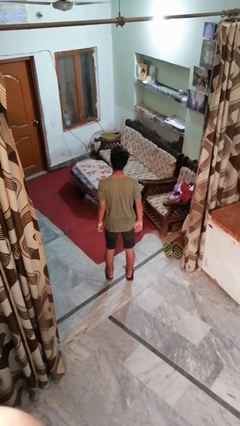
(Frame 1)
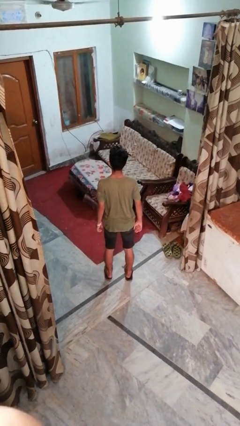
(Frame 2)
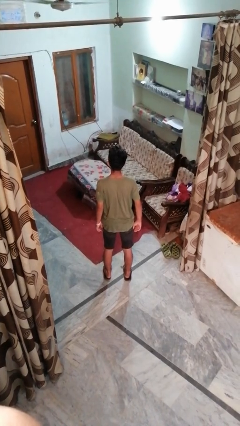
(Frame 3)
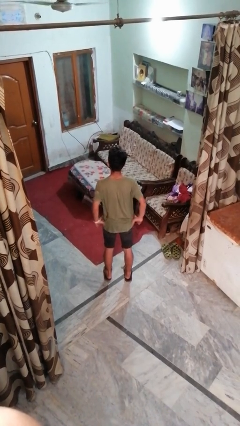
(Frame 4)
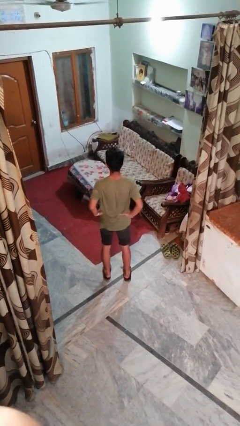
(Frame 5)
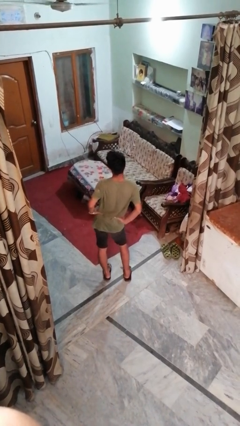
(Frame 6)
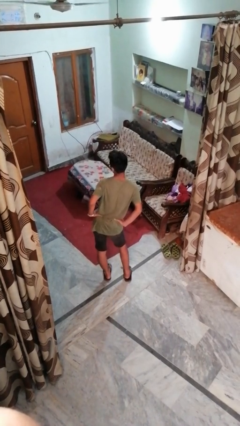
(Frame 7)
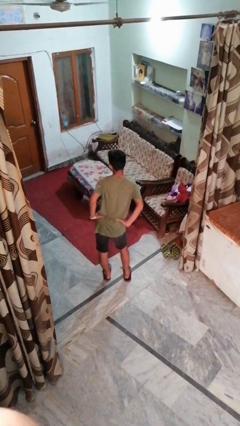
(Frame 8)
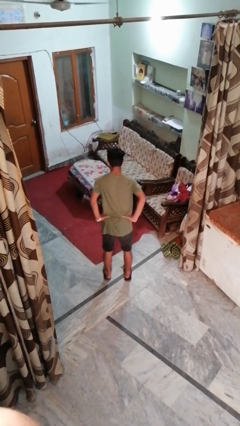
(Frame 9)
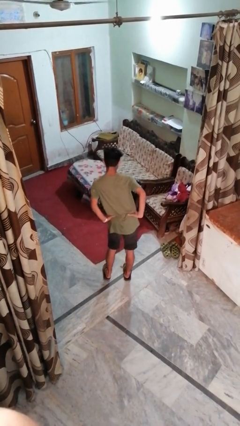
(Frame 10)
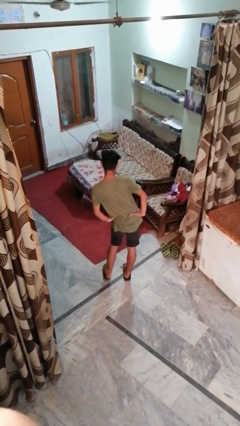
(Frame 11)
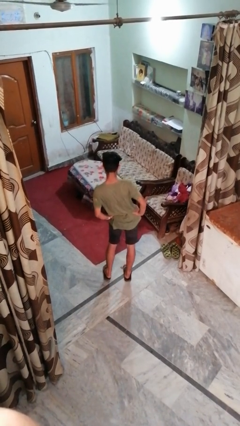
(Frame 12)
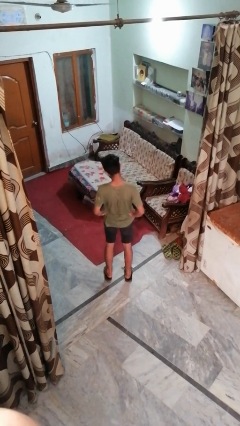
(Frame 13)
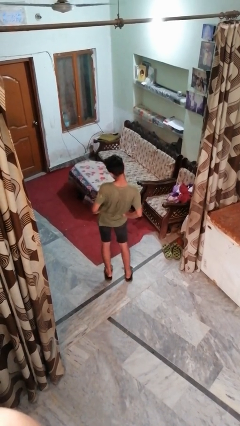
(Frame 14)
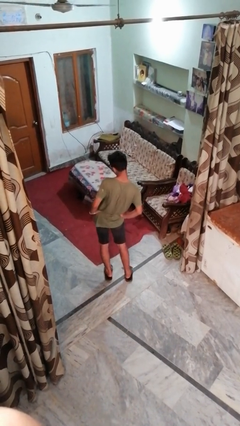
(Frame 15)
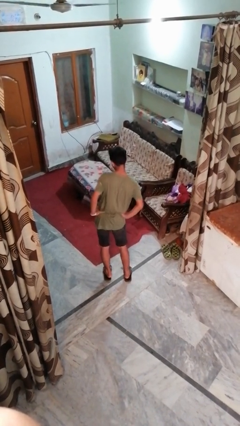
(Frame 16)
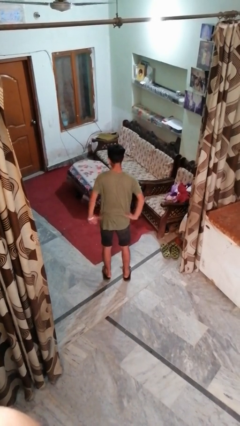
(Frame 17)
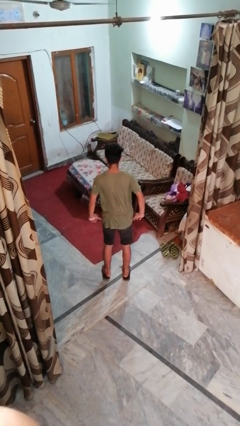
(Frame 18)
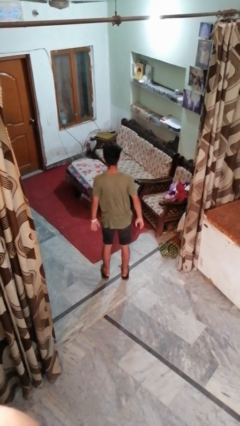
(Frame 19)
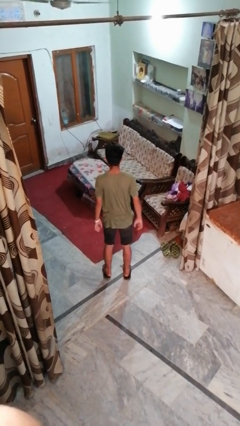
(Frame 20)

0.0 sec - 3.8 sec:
person wiggles hips

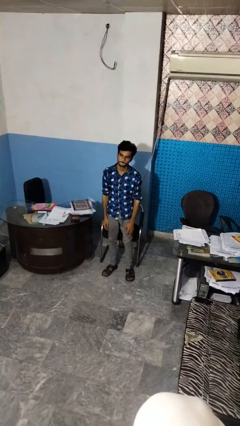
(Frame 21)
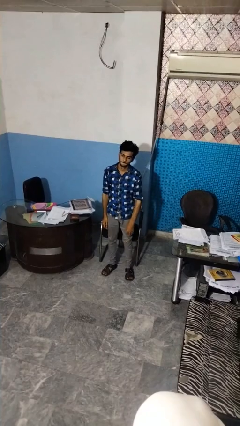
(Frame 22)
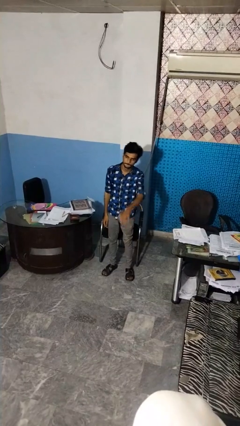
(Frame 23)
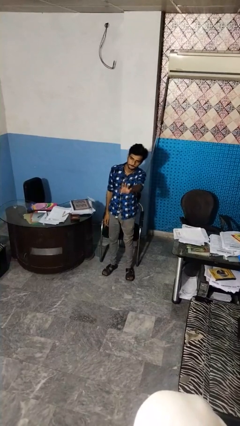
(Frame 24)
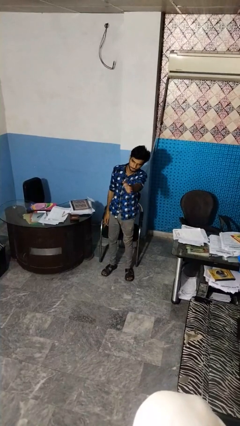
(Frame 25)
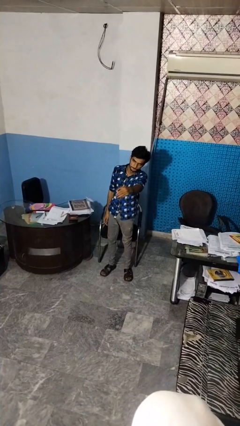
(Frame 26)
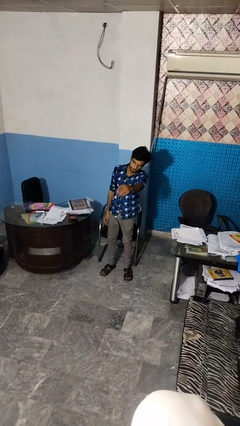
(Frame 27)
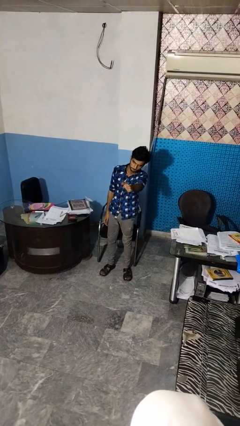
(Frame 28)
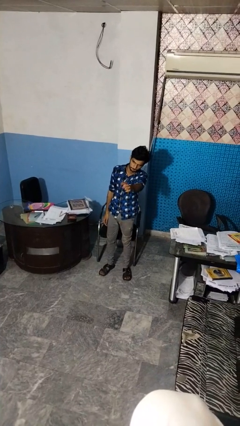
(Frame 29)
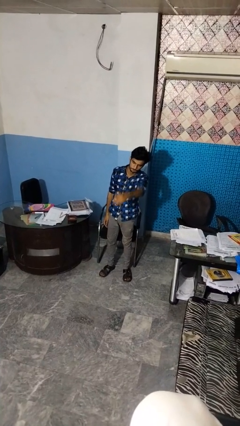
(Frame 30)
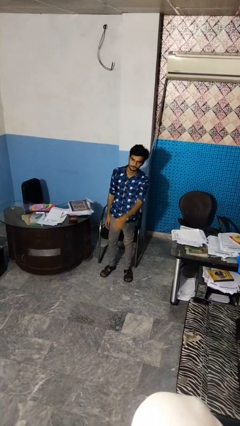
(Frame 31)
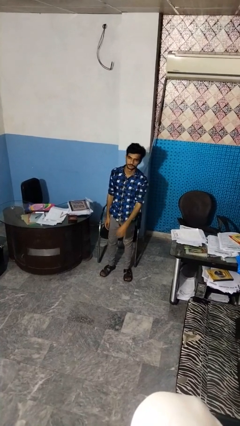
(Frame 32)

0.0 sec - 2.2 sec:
person gestures come here

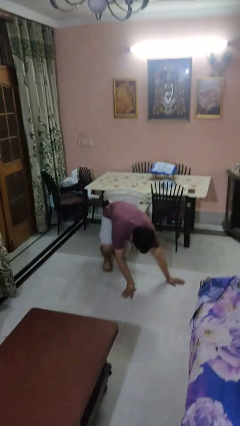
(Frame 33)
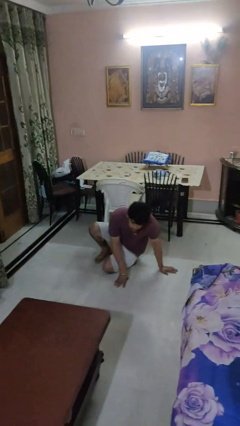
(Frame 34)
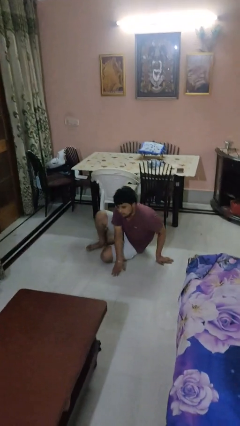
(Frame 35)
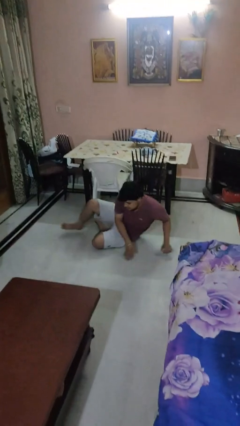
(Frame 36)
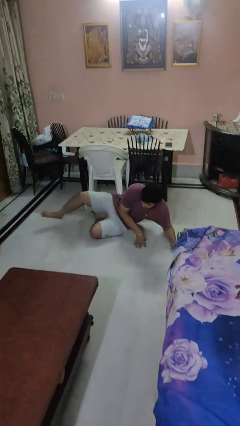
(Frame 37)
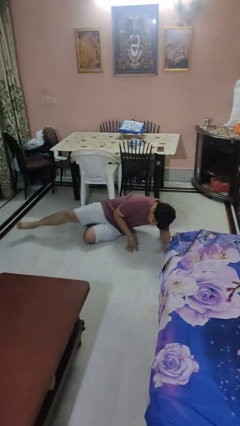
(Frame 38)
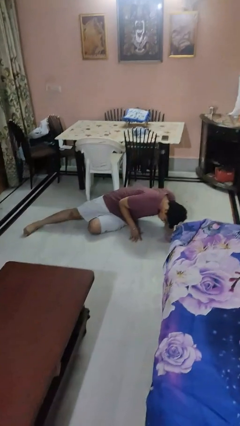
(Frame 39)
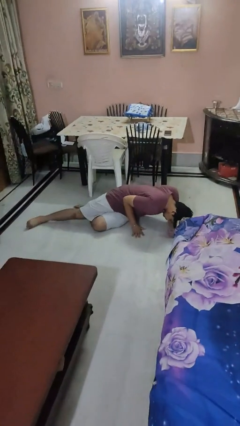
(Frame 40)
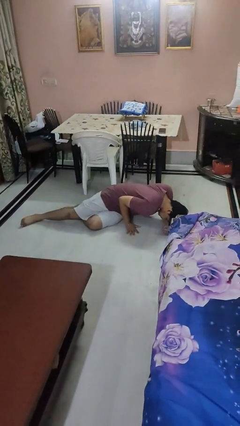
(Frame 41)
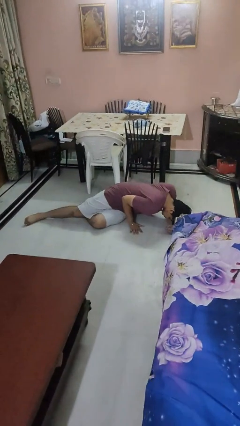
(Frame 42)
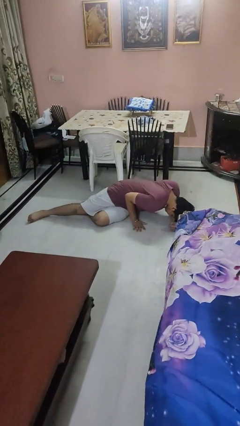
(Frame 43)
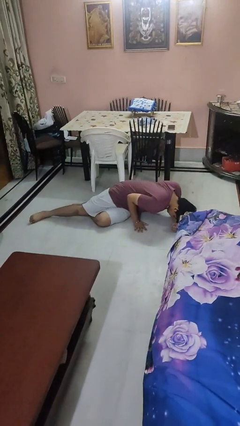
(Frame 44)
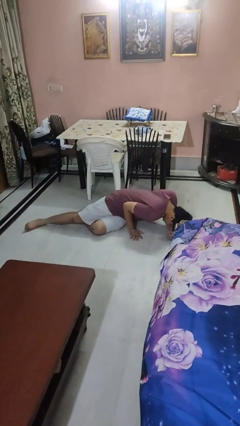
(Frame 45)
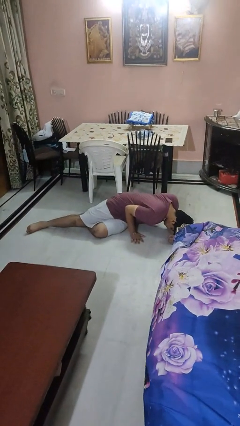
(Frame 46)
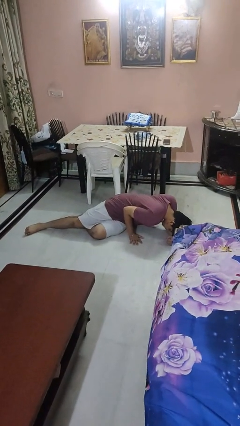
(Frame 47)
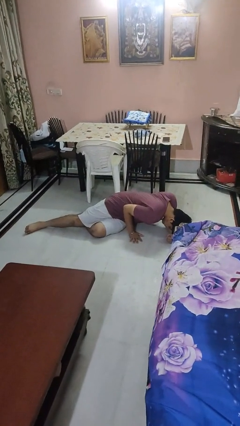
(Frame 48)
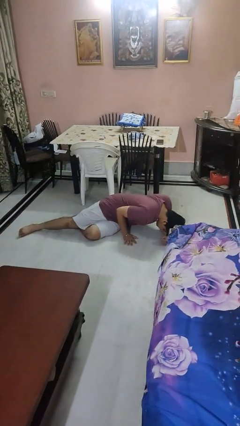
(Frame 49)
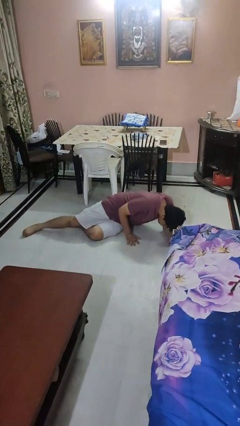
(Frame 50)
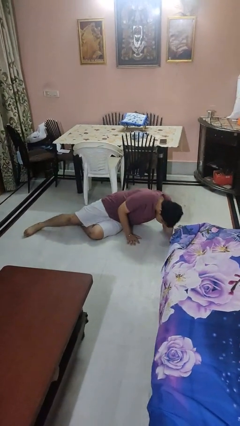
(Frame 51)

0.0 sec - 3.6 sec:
person lies down on floor

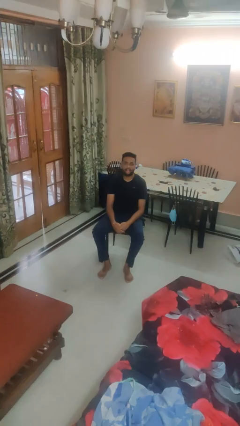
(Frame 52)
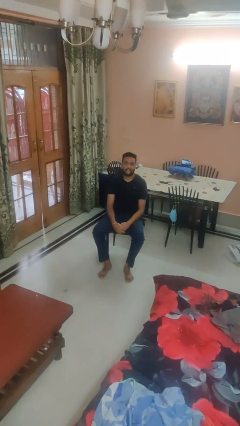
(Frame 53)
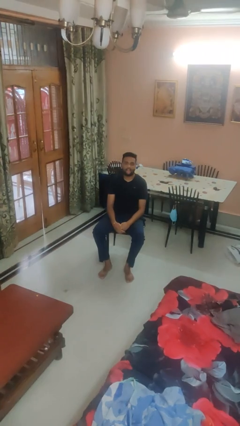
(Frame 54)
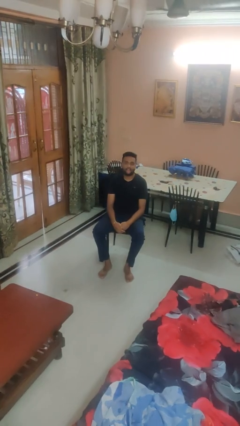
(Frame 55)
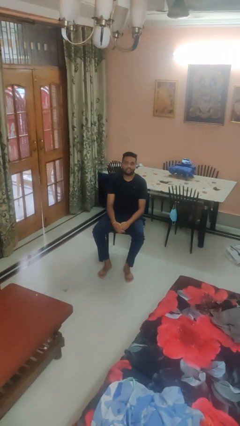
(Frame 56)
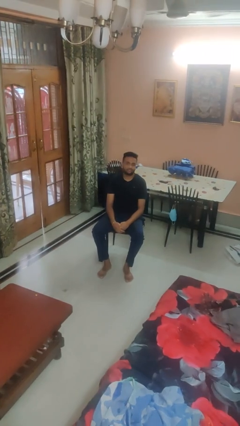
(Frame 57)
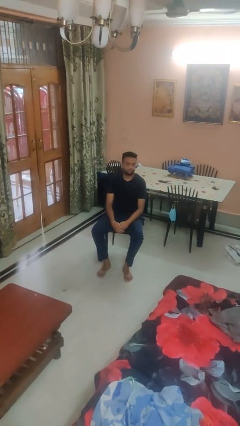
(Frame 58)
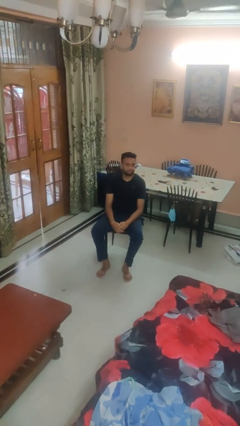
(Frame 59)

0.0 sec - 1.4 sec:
person sticks out tongue

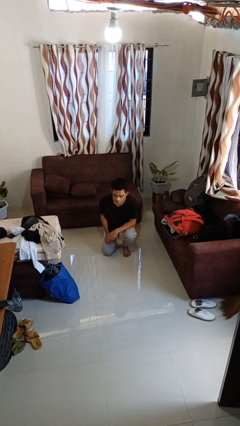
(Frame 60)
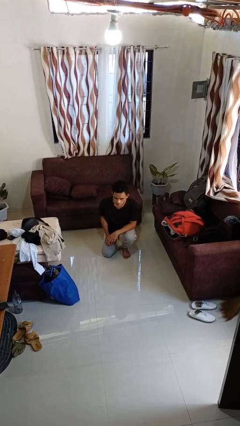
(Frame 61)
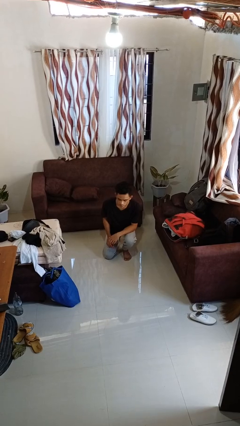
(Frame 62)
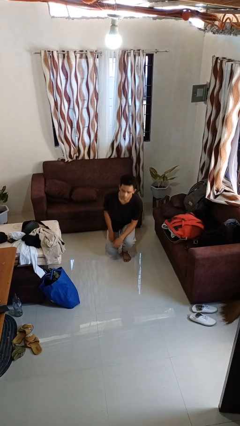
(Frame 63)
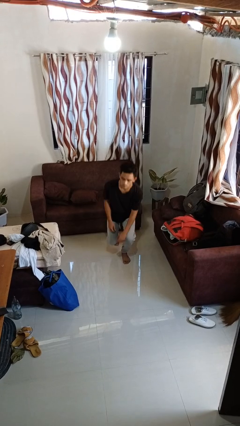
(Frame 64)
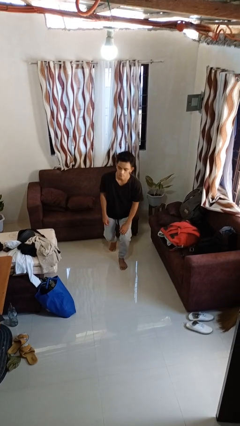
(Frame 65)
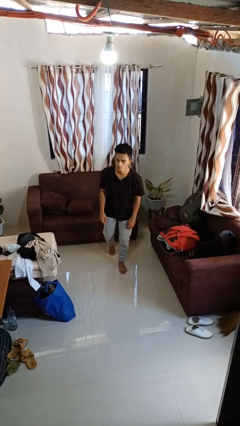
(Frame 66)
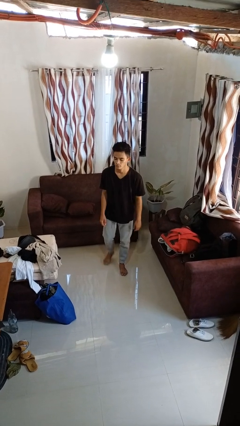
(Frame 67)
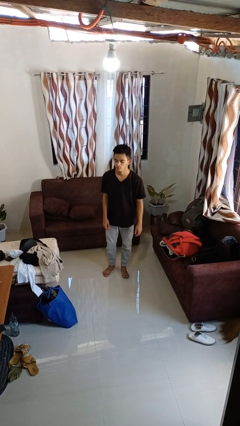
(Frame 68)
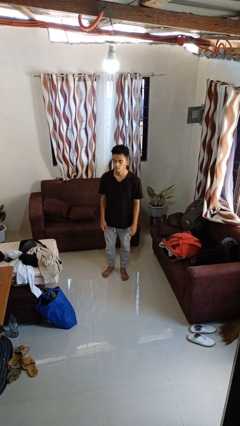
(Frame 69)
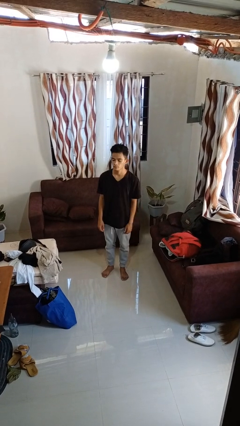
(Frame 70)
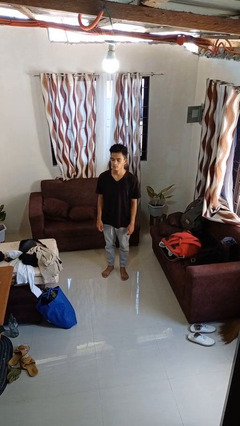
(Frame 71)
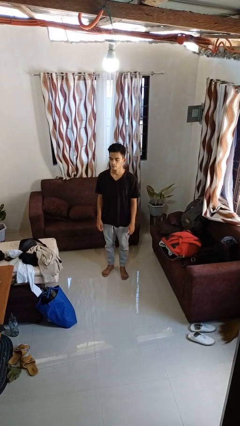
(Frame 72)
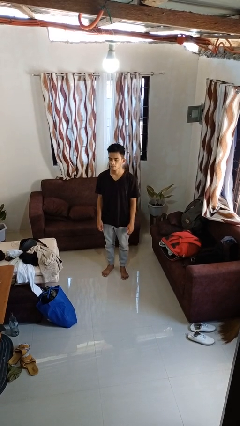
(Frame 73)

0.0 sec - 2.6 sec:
person stands up from floor

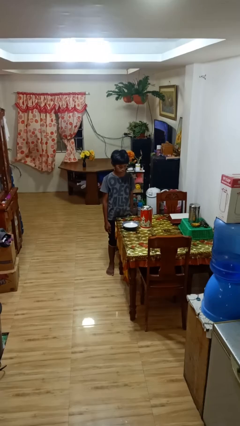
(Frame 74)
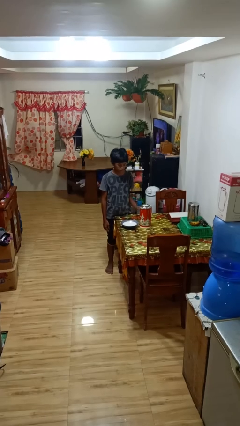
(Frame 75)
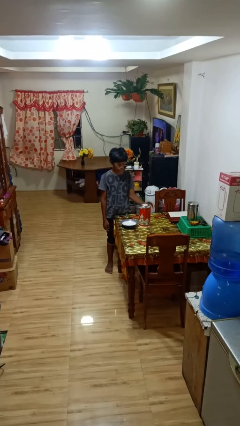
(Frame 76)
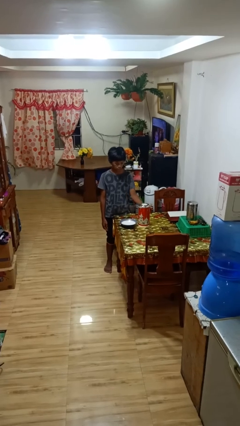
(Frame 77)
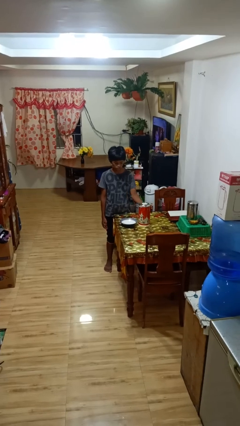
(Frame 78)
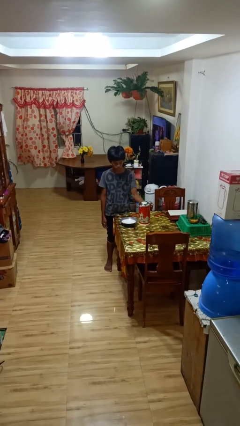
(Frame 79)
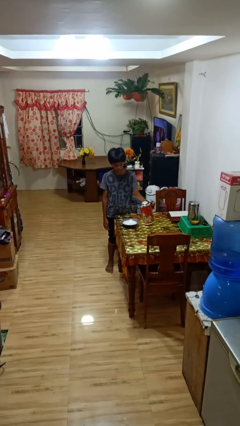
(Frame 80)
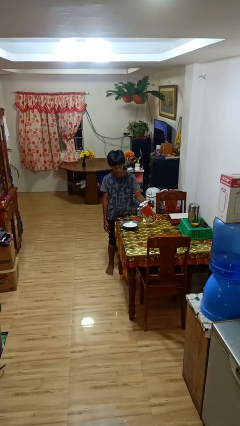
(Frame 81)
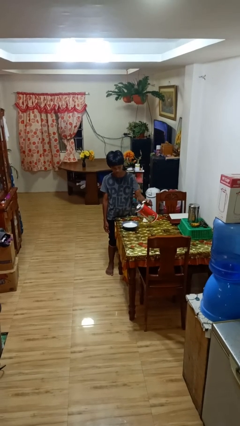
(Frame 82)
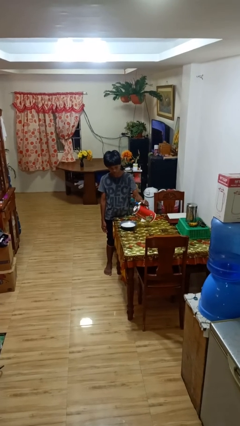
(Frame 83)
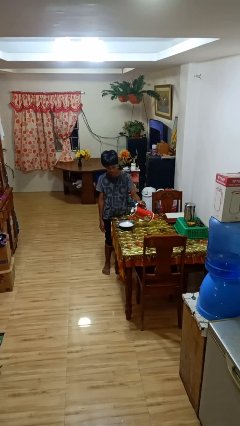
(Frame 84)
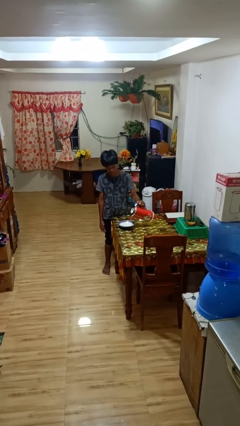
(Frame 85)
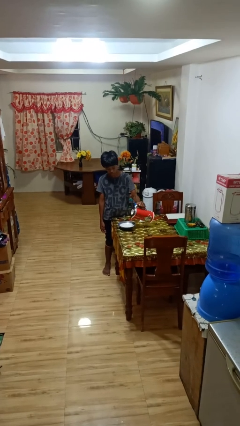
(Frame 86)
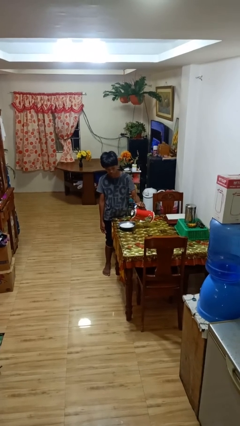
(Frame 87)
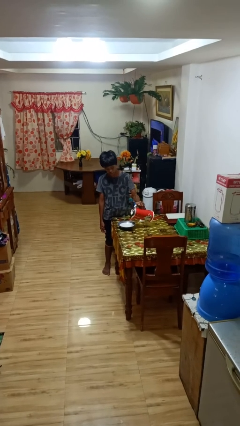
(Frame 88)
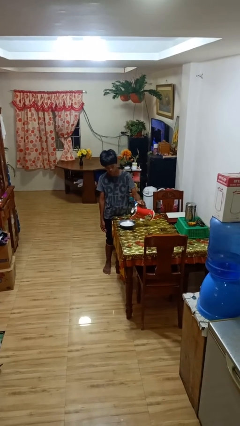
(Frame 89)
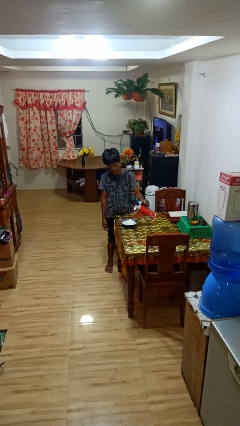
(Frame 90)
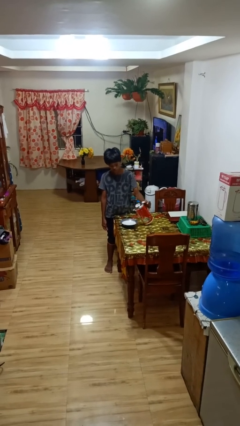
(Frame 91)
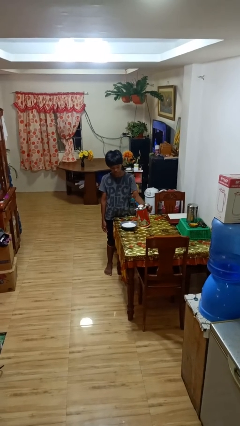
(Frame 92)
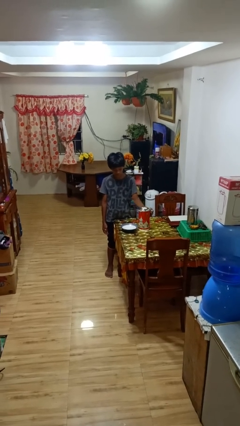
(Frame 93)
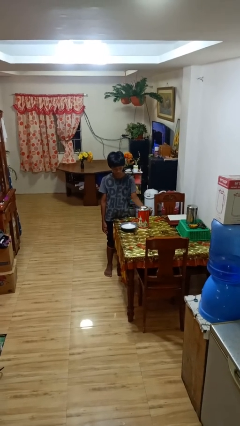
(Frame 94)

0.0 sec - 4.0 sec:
person pours into bowl
